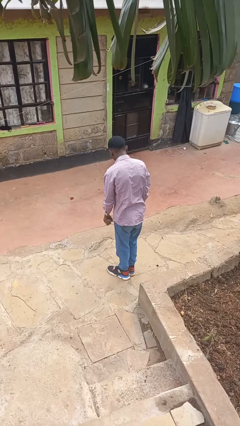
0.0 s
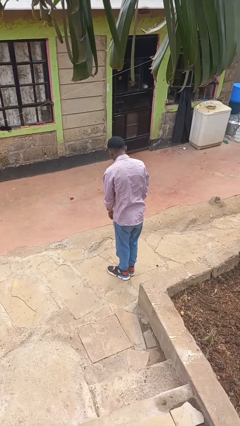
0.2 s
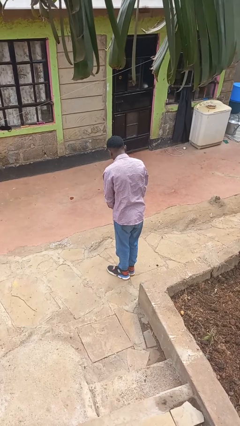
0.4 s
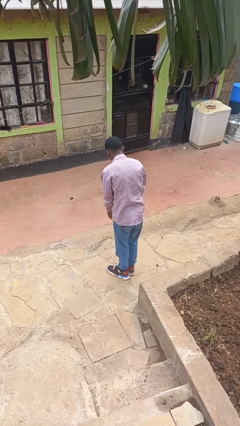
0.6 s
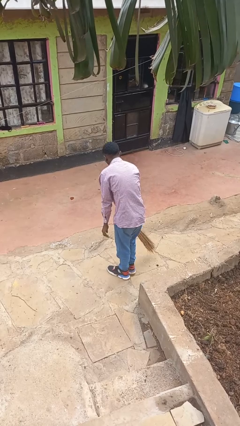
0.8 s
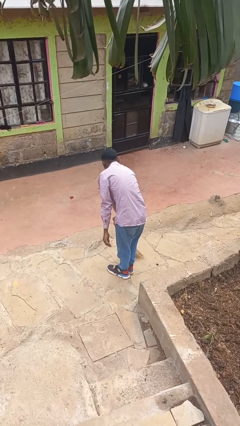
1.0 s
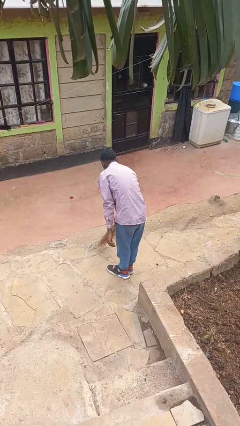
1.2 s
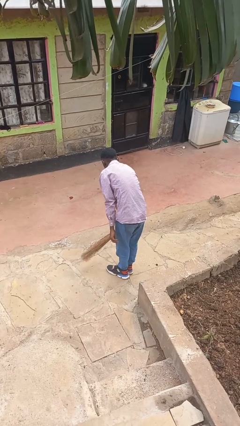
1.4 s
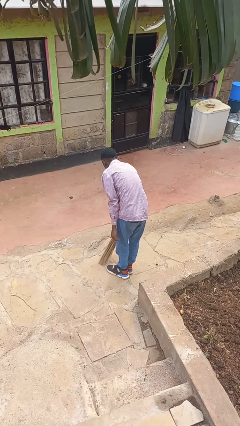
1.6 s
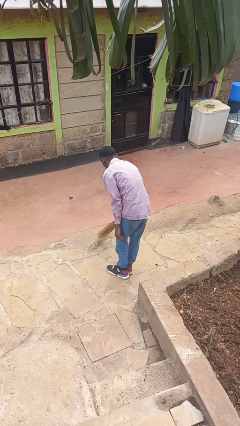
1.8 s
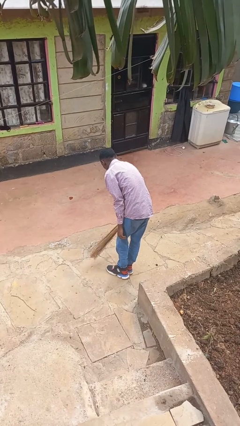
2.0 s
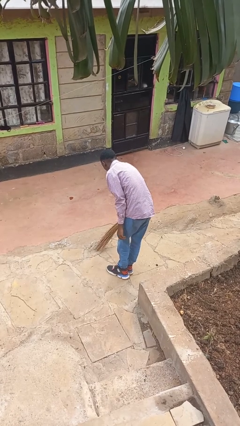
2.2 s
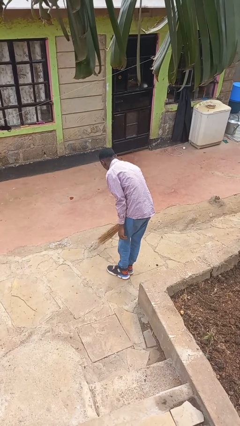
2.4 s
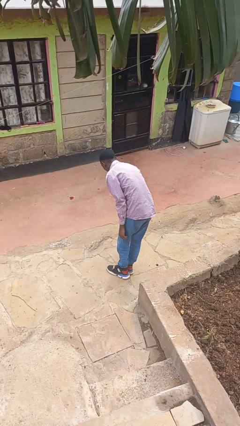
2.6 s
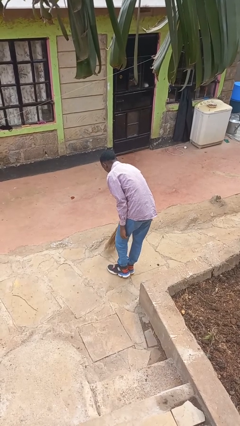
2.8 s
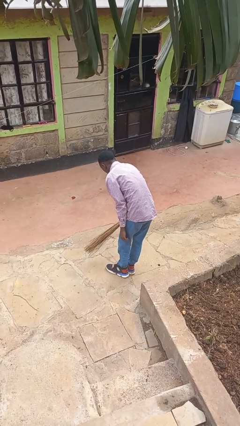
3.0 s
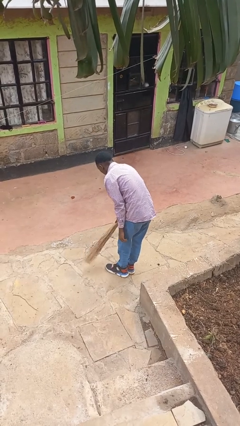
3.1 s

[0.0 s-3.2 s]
person sweeps floor

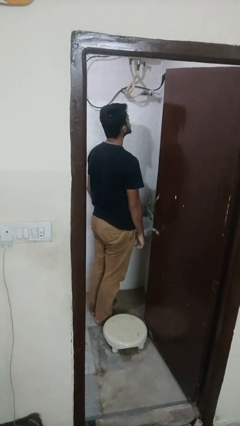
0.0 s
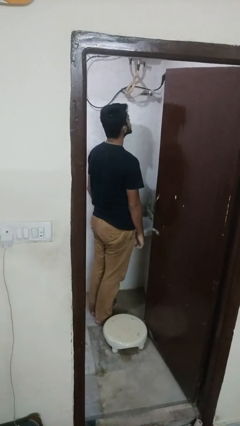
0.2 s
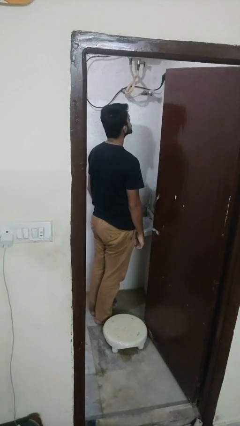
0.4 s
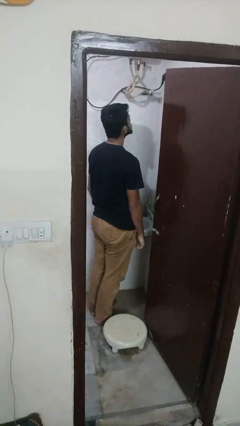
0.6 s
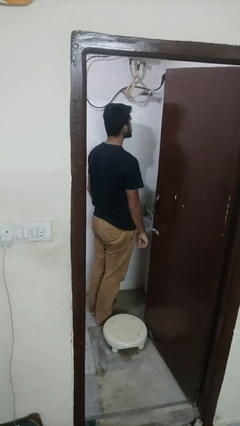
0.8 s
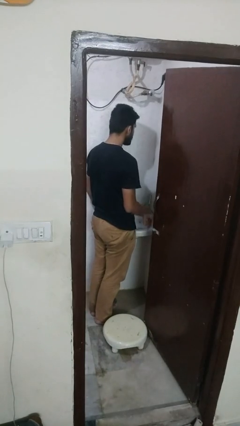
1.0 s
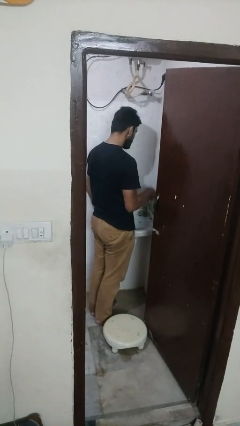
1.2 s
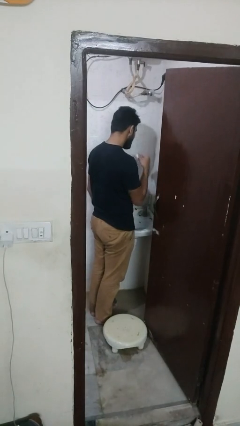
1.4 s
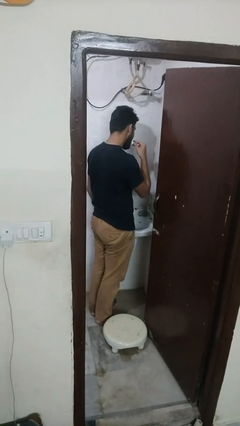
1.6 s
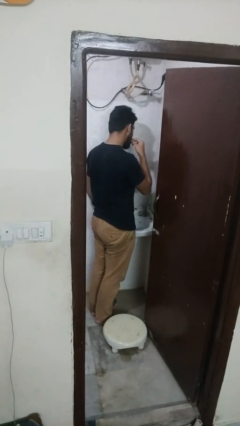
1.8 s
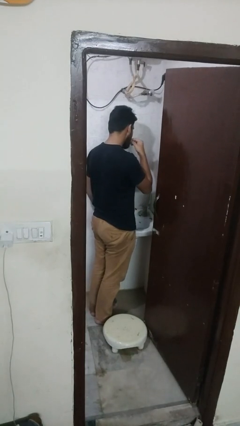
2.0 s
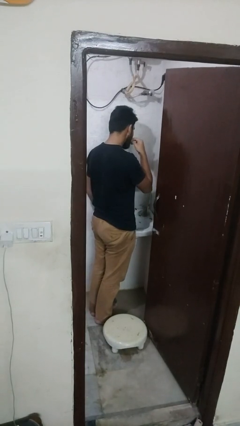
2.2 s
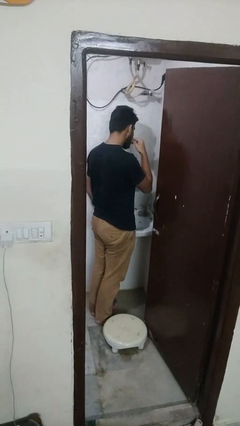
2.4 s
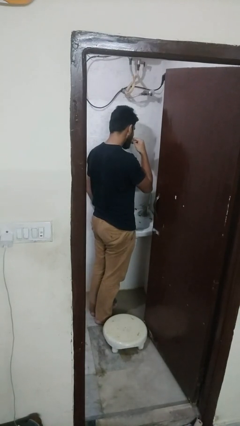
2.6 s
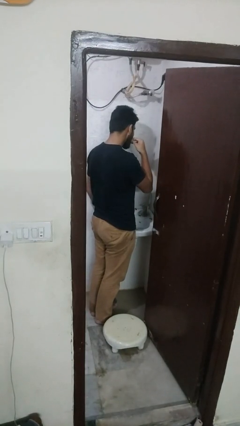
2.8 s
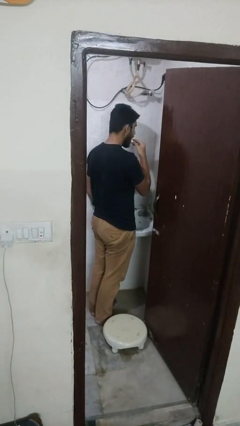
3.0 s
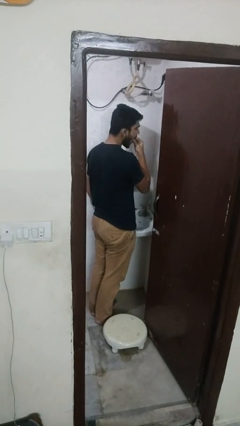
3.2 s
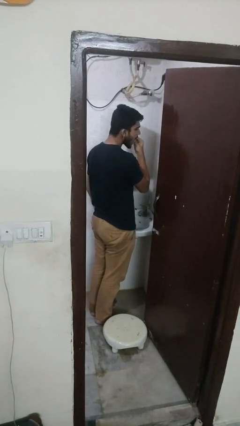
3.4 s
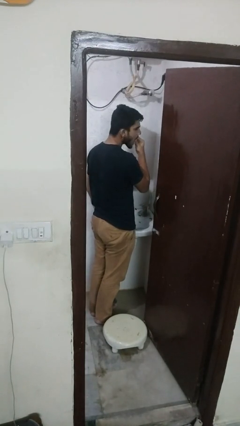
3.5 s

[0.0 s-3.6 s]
person flosses

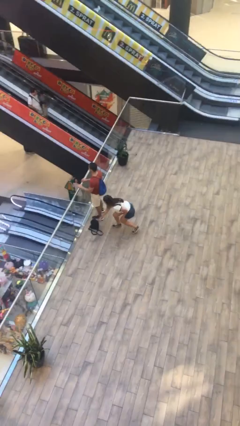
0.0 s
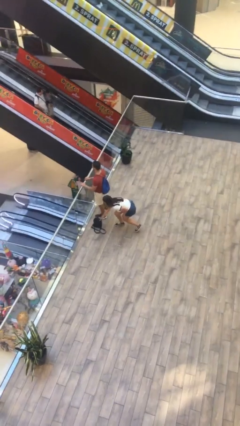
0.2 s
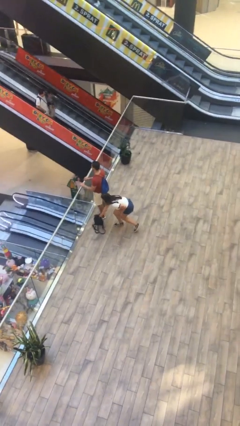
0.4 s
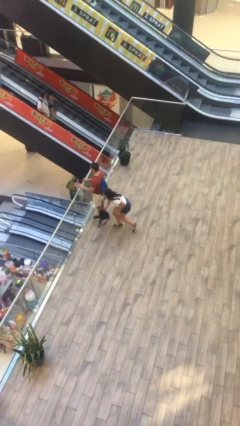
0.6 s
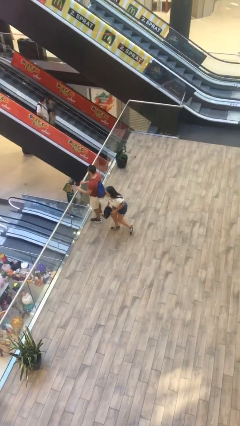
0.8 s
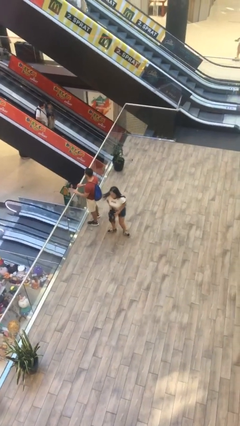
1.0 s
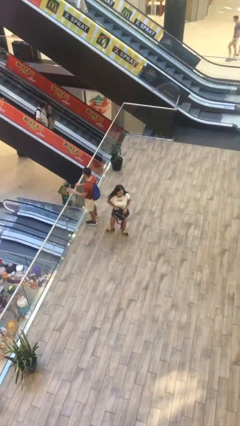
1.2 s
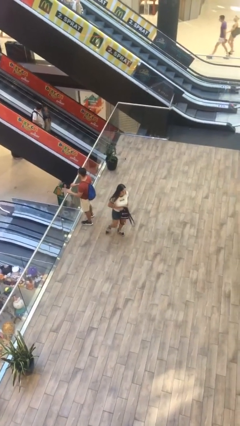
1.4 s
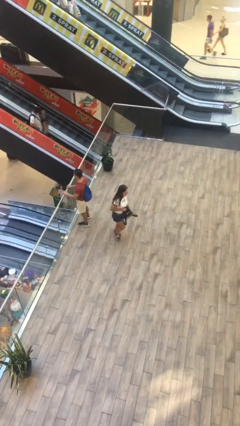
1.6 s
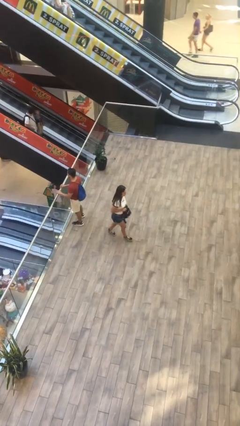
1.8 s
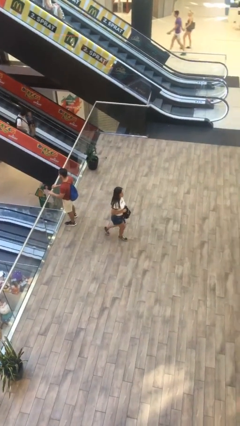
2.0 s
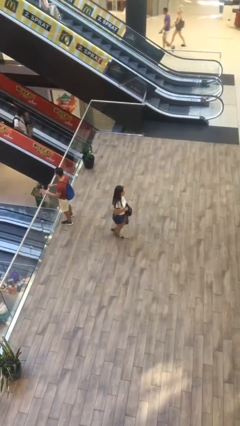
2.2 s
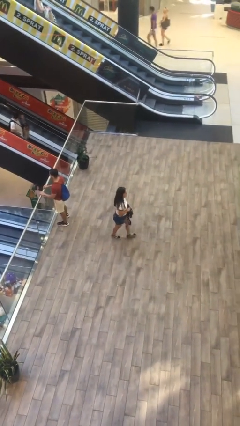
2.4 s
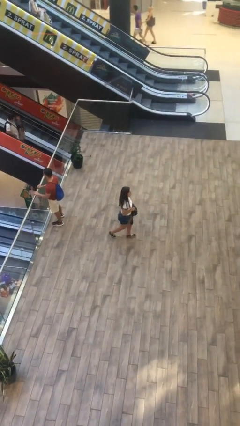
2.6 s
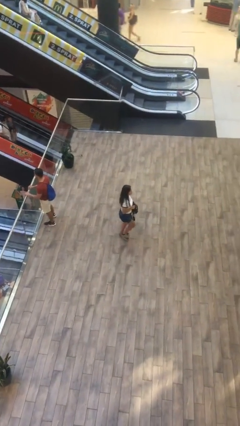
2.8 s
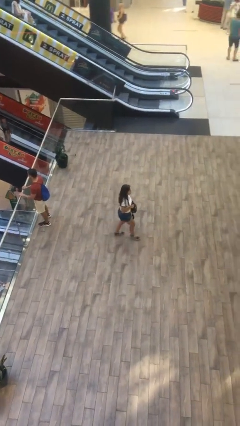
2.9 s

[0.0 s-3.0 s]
person steals object from person

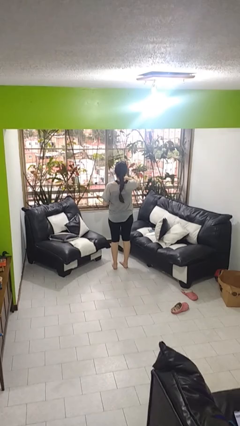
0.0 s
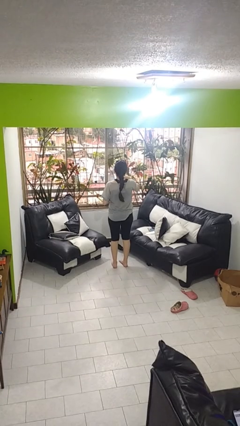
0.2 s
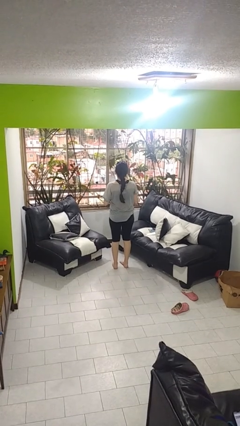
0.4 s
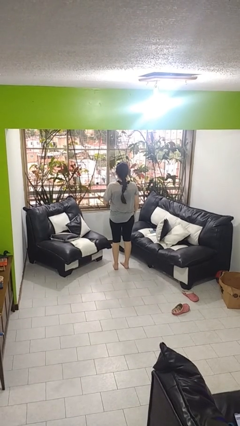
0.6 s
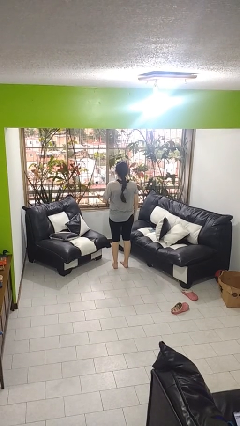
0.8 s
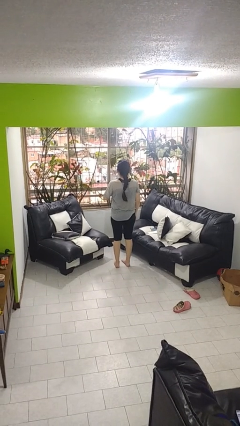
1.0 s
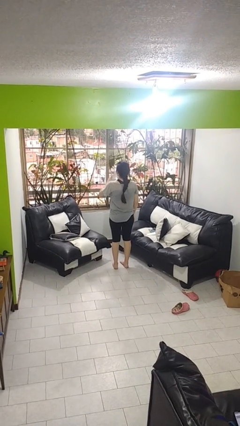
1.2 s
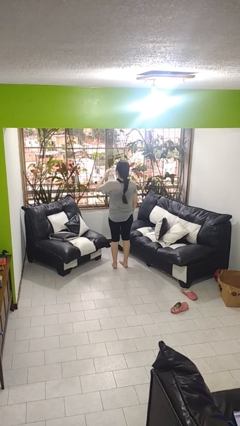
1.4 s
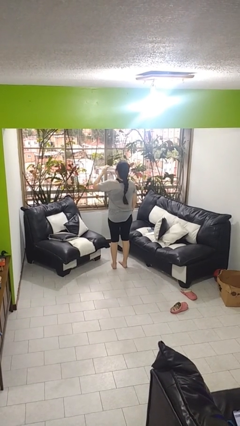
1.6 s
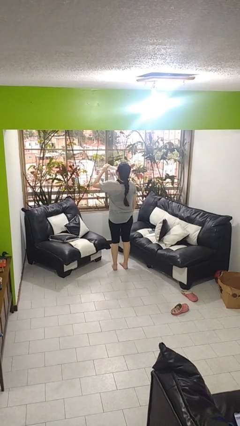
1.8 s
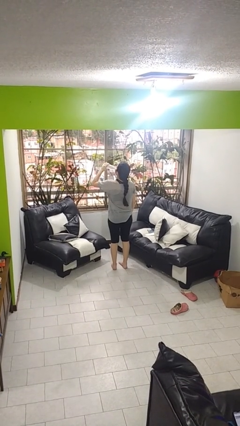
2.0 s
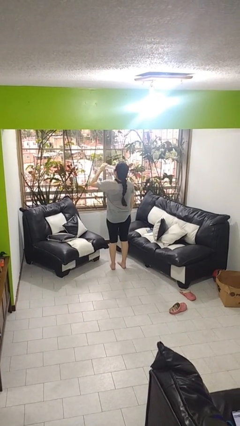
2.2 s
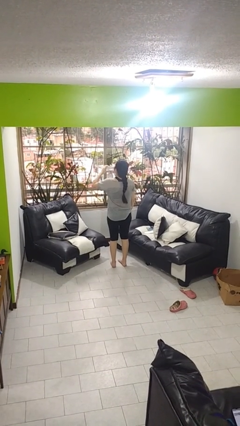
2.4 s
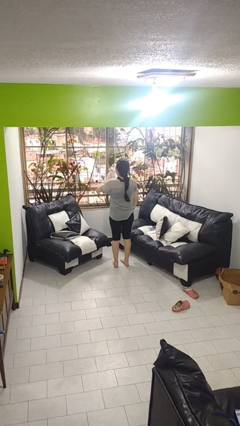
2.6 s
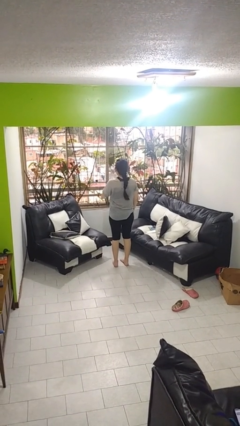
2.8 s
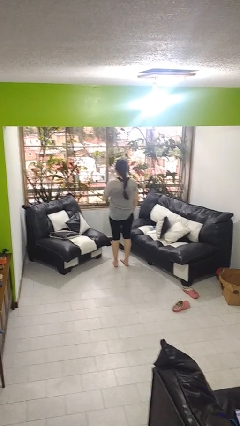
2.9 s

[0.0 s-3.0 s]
person drinks from bottle

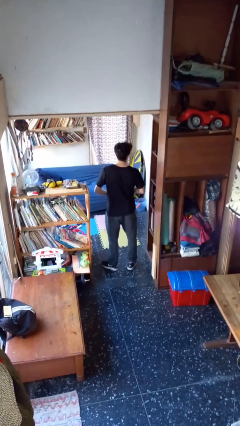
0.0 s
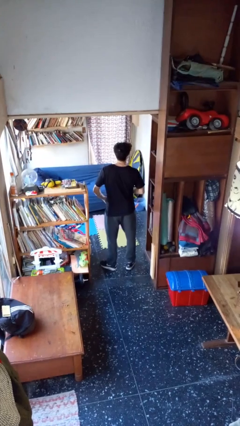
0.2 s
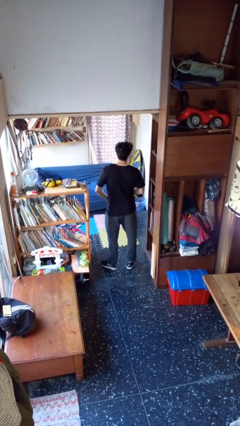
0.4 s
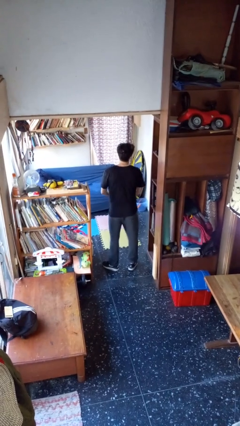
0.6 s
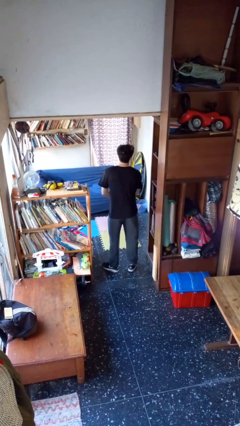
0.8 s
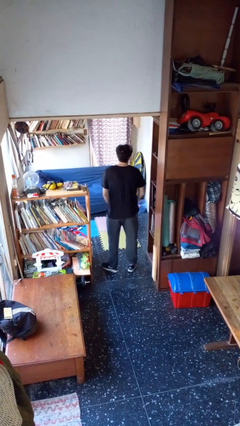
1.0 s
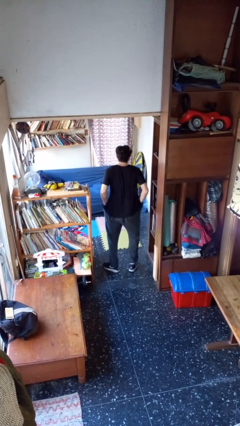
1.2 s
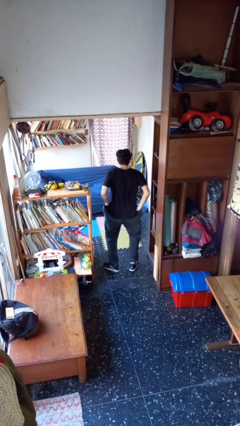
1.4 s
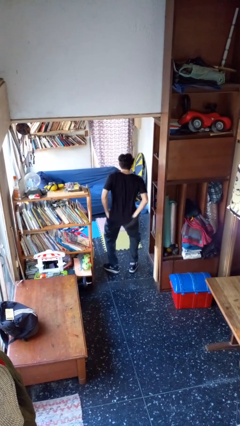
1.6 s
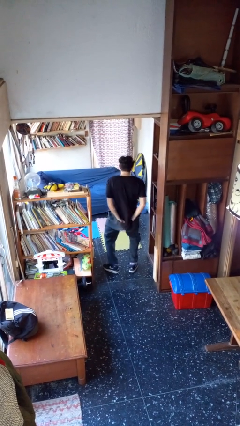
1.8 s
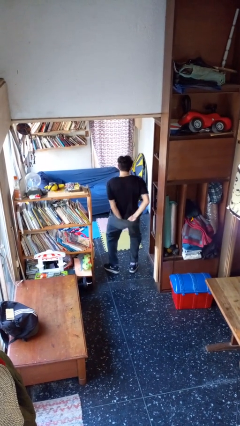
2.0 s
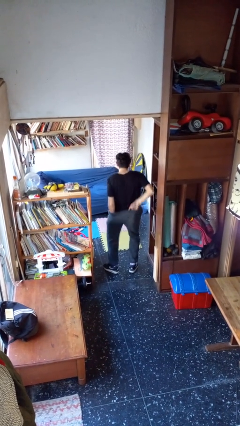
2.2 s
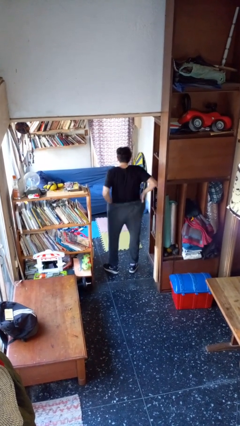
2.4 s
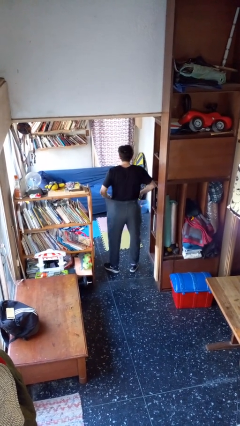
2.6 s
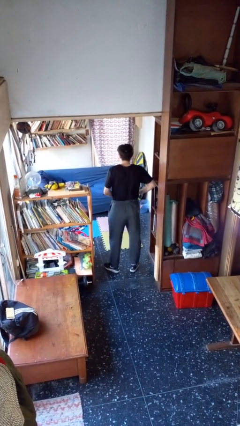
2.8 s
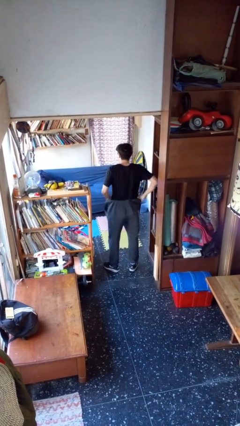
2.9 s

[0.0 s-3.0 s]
person tucks in shirt

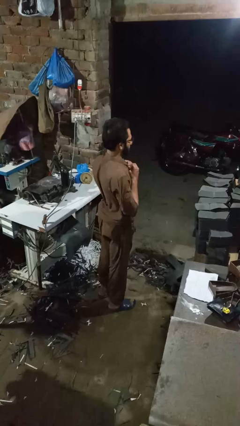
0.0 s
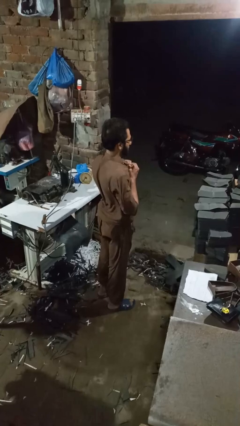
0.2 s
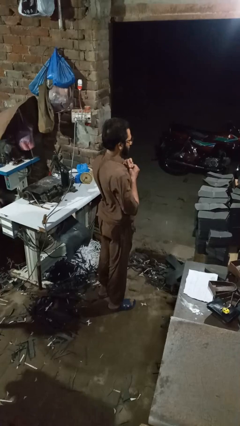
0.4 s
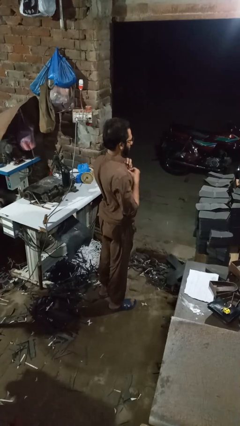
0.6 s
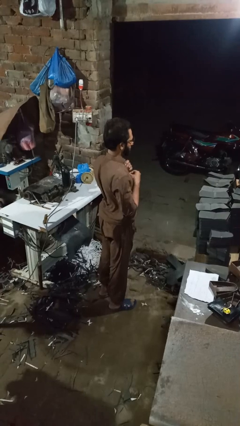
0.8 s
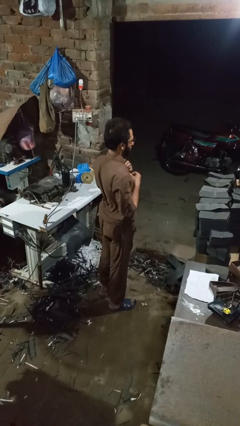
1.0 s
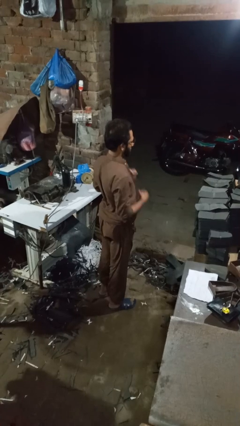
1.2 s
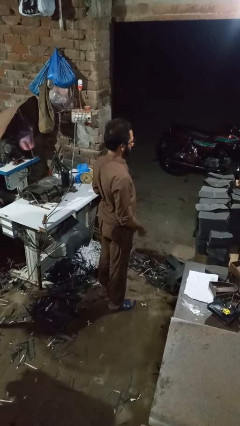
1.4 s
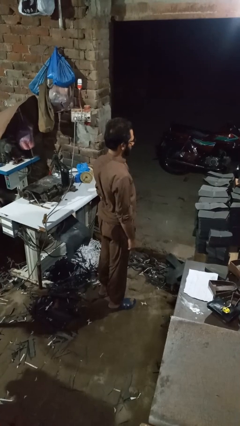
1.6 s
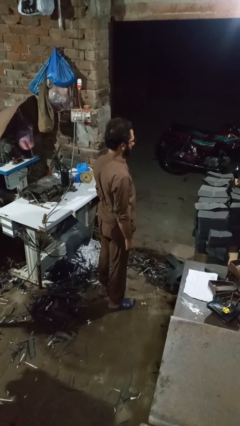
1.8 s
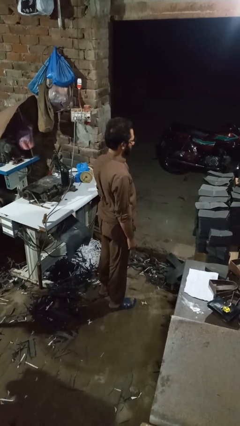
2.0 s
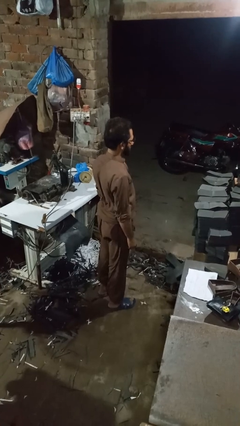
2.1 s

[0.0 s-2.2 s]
person unbuttons shirt
